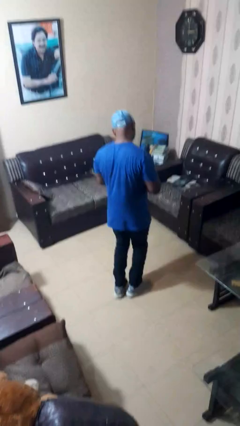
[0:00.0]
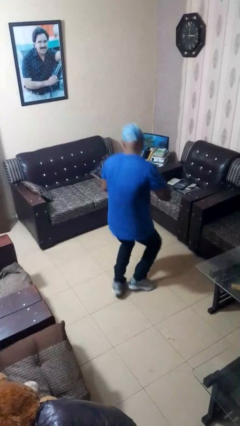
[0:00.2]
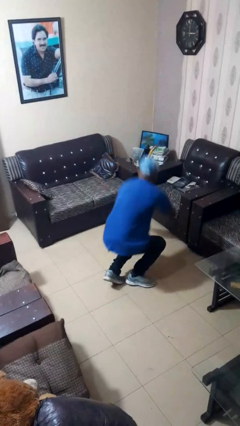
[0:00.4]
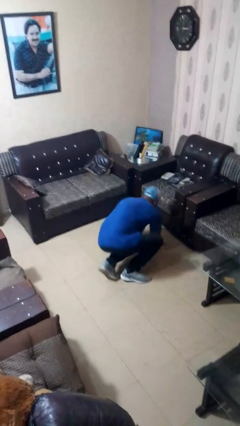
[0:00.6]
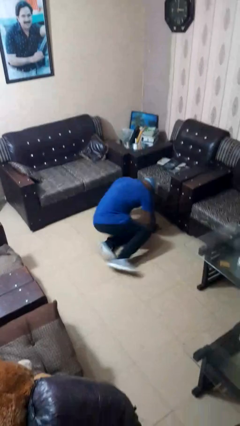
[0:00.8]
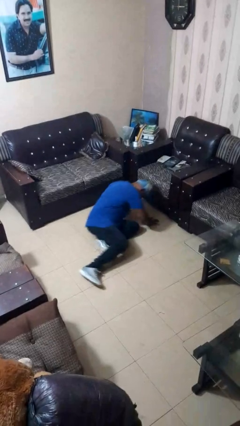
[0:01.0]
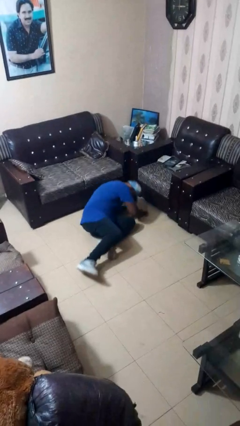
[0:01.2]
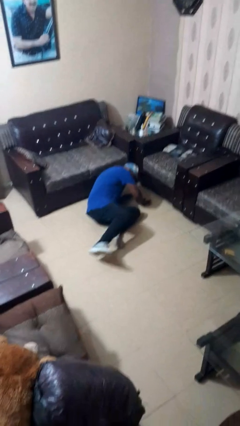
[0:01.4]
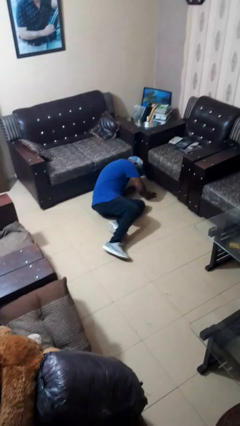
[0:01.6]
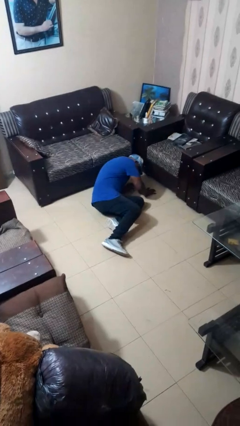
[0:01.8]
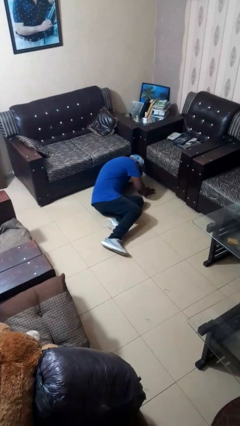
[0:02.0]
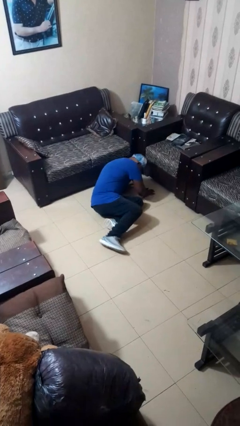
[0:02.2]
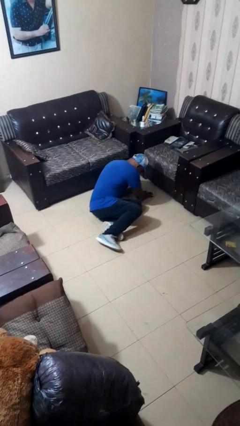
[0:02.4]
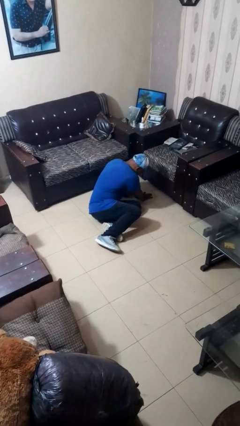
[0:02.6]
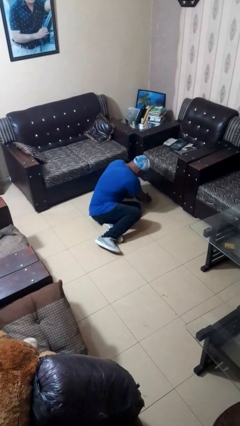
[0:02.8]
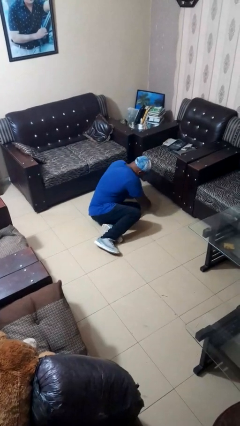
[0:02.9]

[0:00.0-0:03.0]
person trips on object on floor

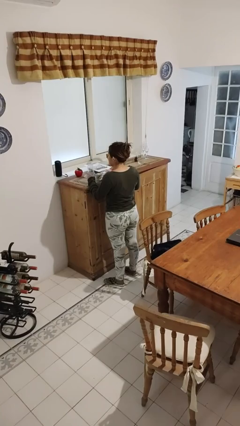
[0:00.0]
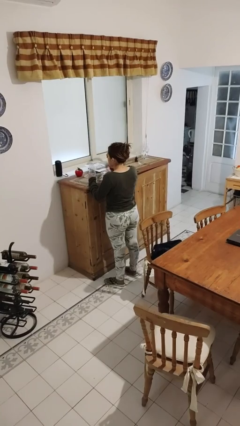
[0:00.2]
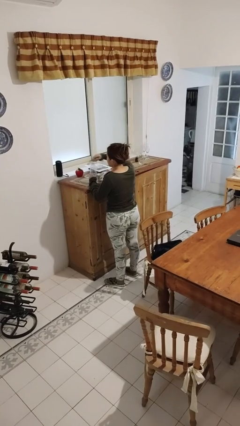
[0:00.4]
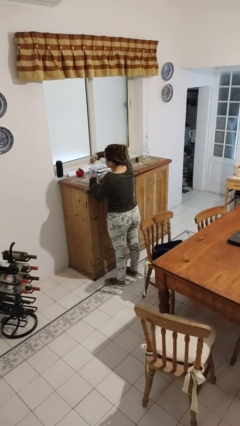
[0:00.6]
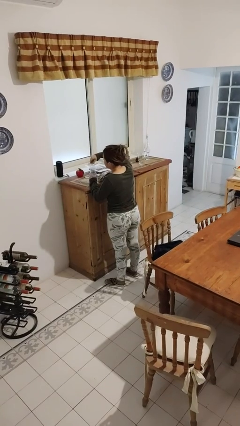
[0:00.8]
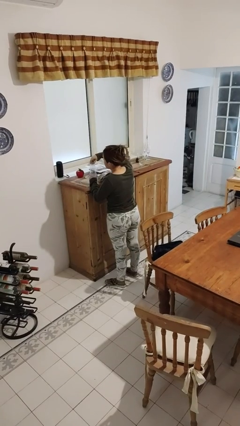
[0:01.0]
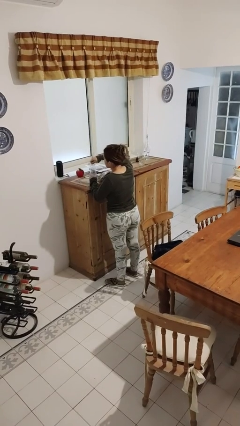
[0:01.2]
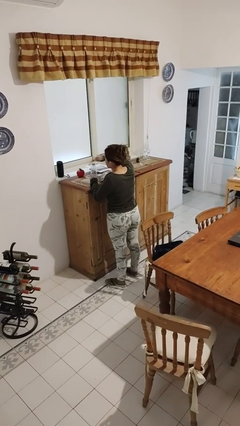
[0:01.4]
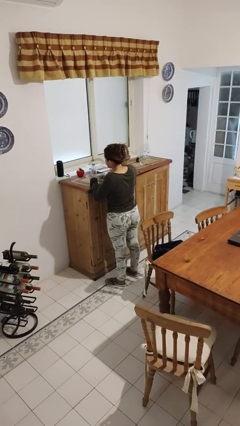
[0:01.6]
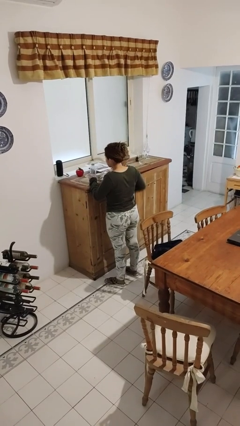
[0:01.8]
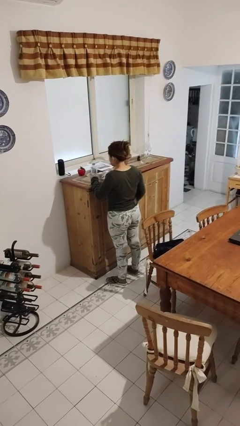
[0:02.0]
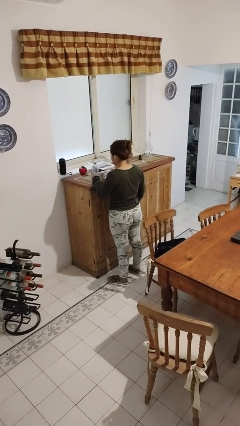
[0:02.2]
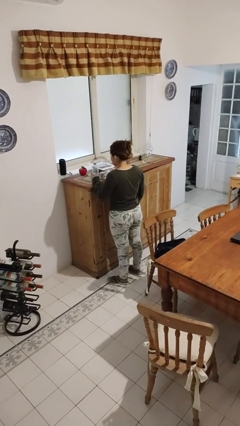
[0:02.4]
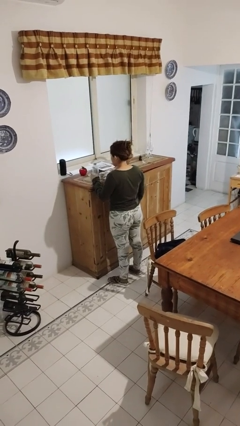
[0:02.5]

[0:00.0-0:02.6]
person screws lid to bottle

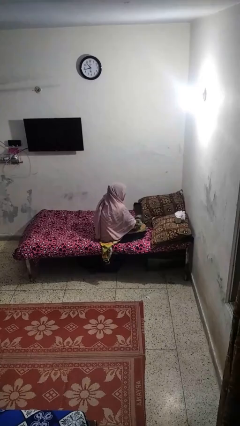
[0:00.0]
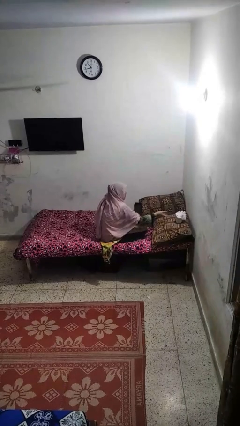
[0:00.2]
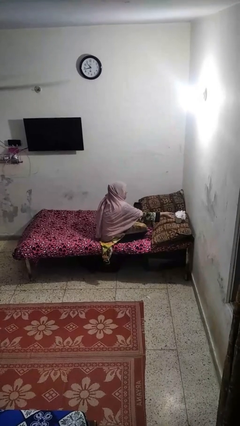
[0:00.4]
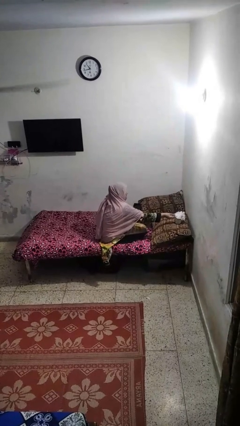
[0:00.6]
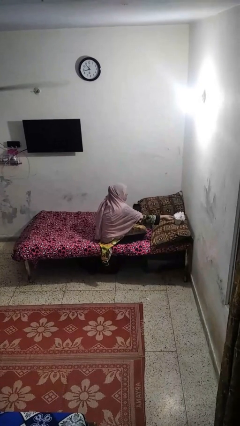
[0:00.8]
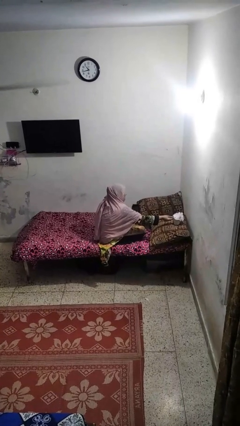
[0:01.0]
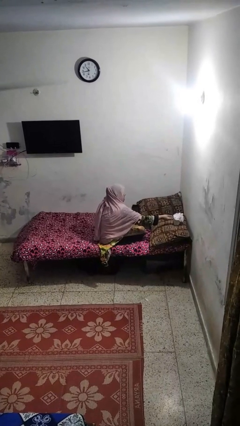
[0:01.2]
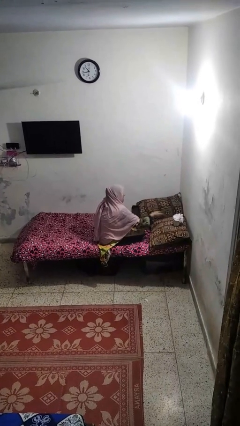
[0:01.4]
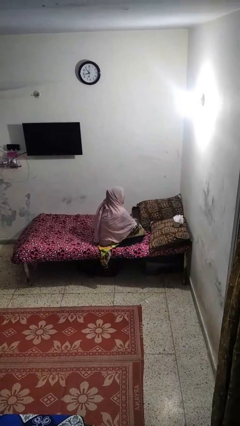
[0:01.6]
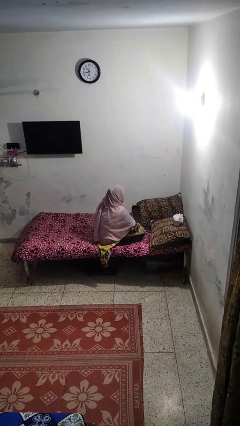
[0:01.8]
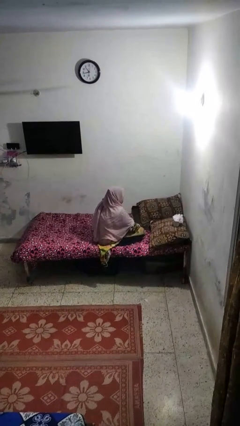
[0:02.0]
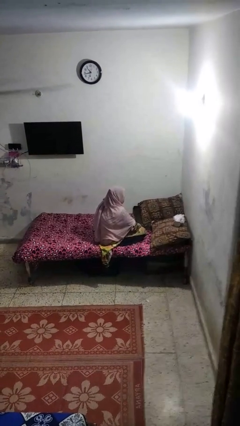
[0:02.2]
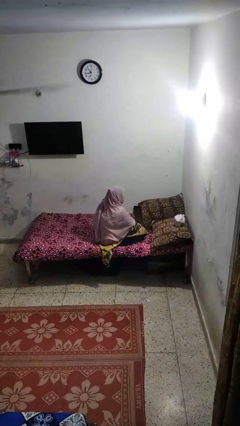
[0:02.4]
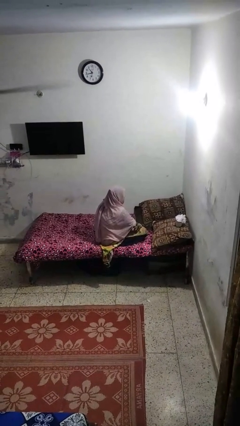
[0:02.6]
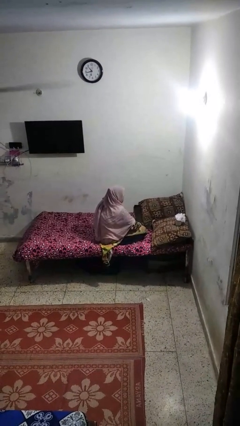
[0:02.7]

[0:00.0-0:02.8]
person arranges flowers in vase

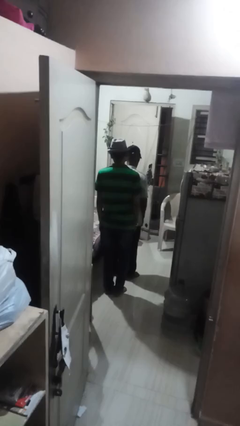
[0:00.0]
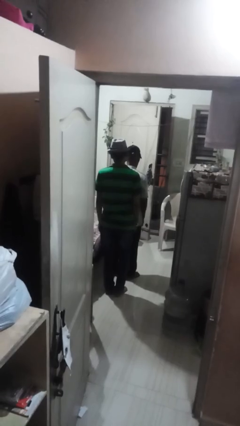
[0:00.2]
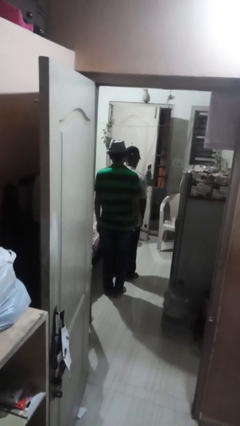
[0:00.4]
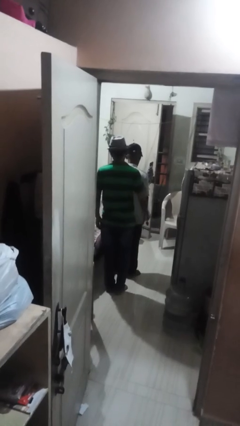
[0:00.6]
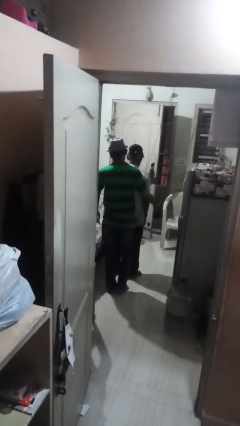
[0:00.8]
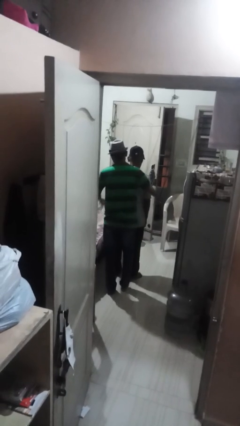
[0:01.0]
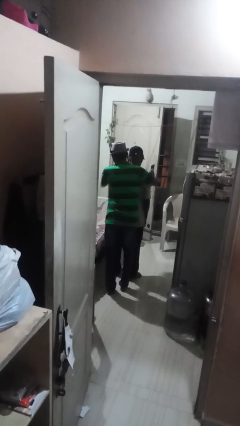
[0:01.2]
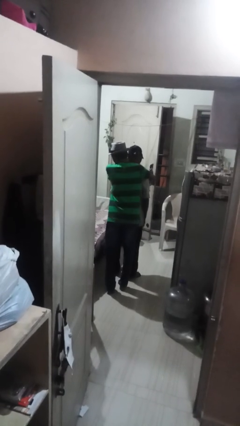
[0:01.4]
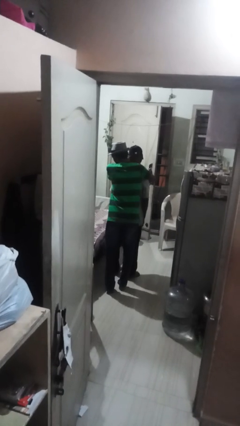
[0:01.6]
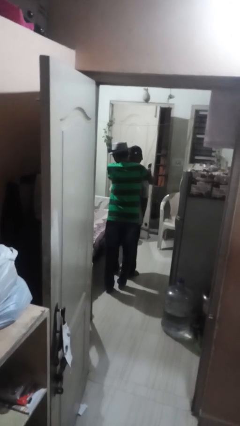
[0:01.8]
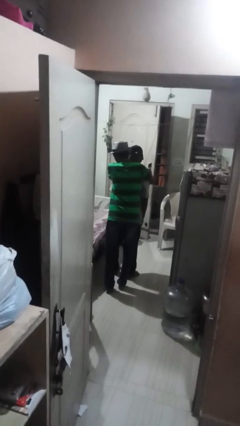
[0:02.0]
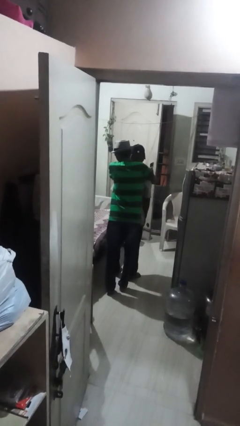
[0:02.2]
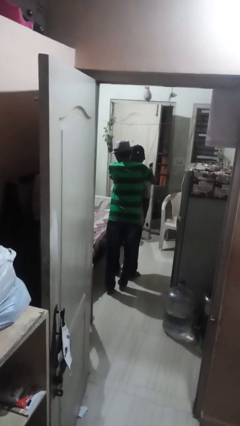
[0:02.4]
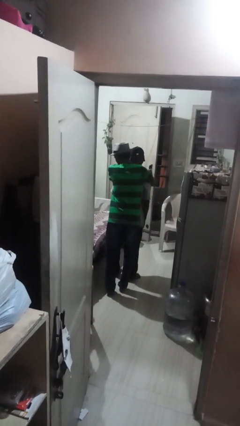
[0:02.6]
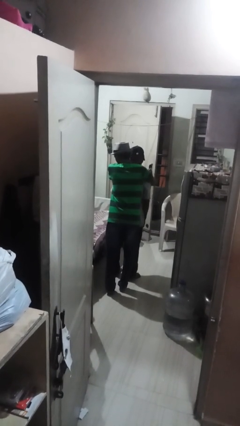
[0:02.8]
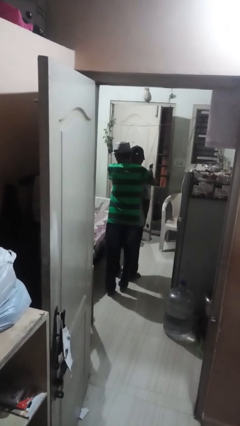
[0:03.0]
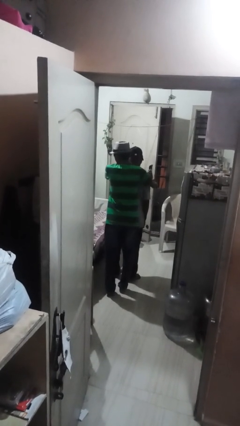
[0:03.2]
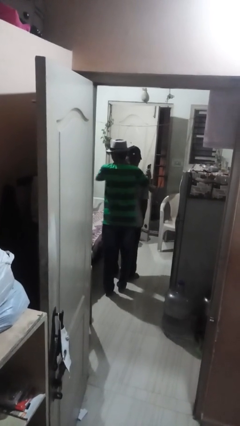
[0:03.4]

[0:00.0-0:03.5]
person hugs person from behind

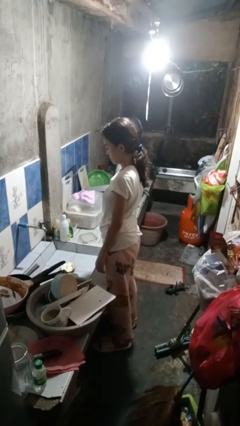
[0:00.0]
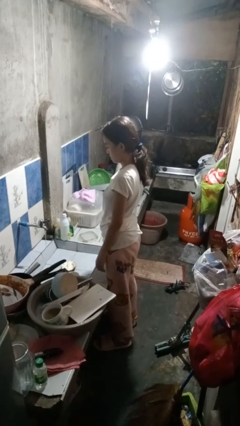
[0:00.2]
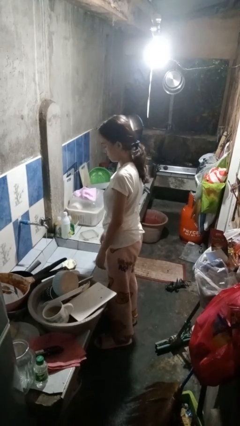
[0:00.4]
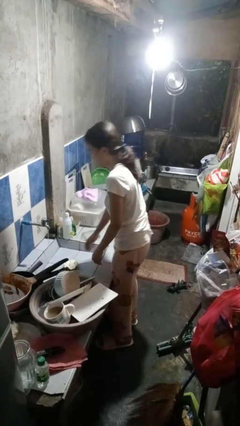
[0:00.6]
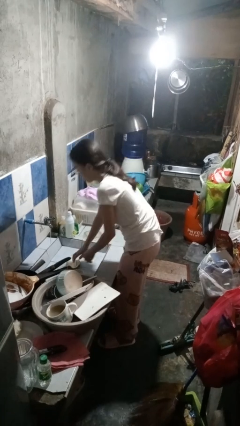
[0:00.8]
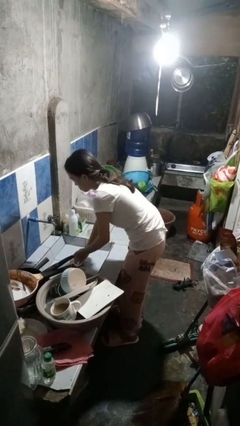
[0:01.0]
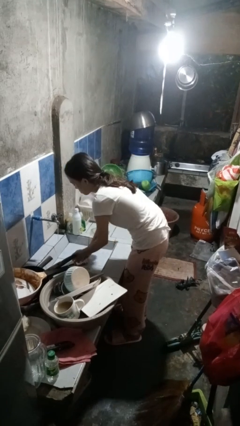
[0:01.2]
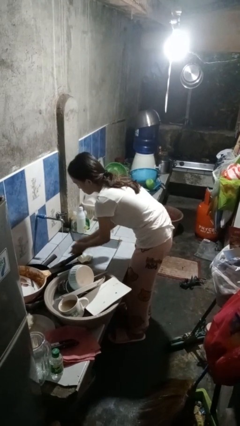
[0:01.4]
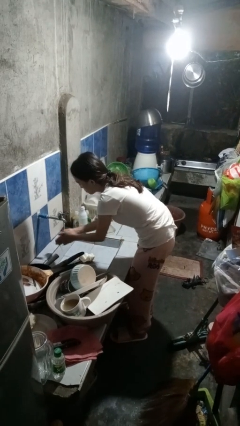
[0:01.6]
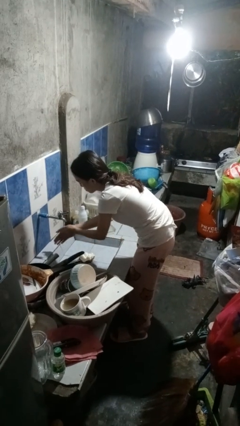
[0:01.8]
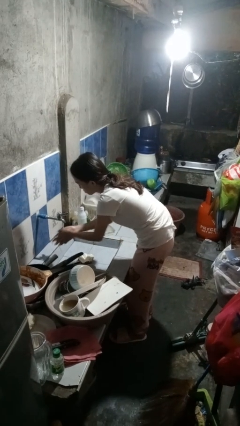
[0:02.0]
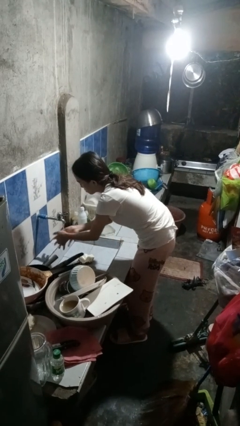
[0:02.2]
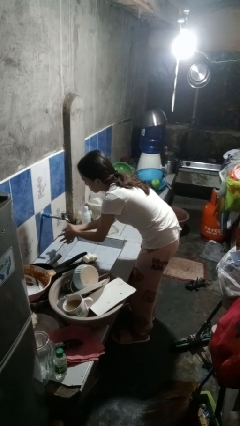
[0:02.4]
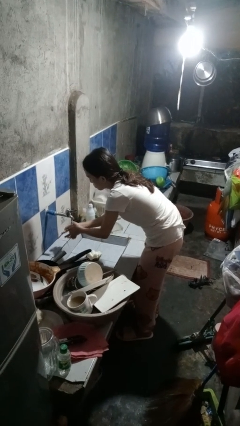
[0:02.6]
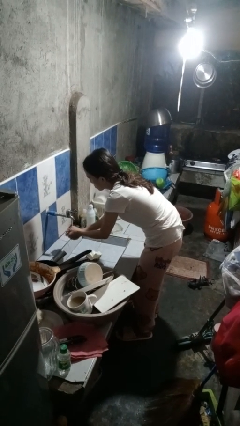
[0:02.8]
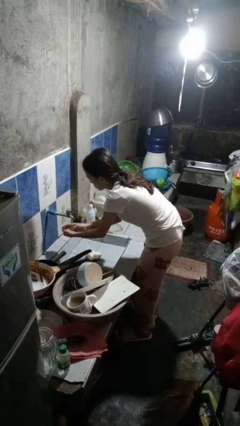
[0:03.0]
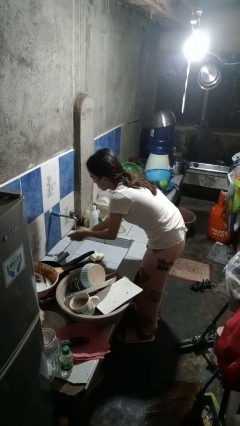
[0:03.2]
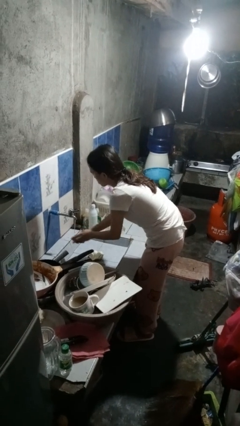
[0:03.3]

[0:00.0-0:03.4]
person washes hands

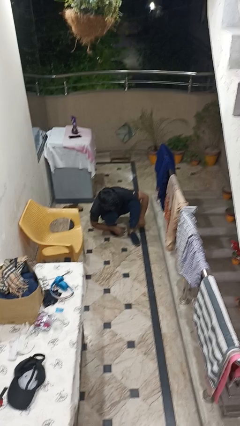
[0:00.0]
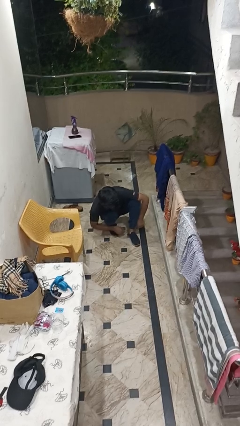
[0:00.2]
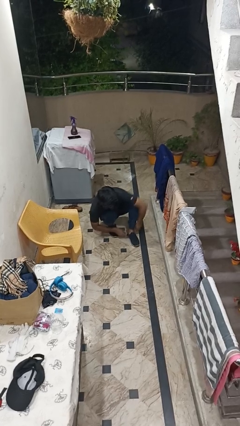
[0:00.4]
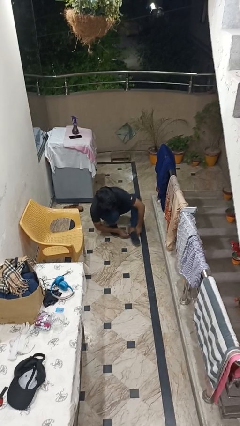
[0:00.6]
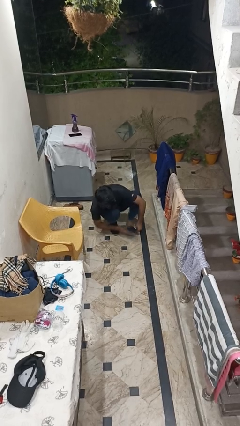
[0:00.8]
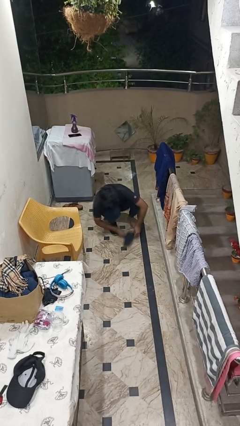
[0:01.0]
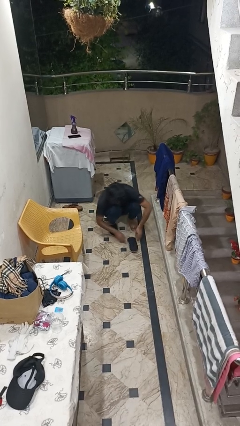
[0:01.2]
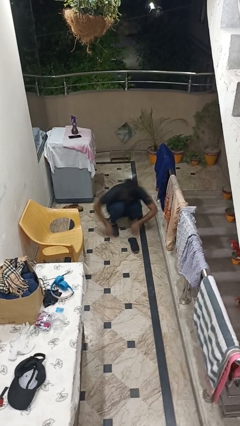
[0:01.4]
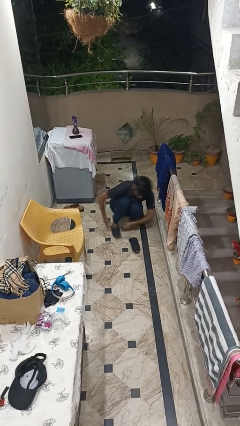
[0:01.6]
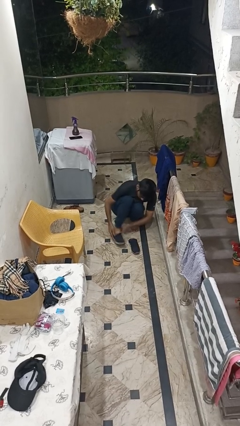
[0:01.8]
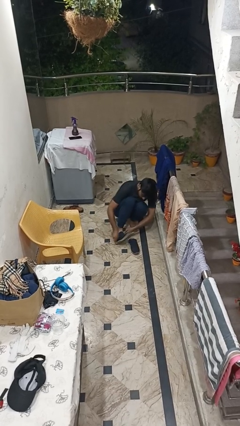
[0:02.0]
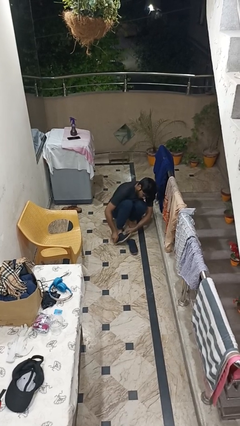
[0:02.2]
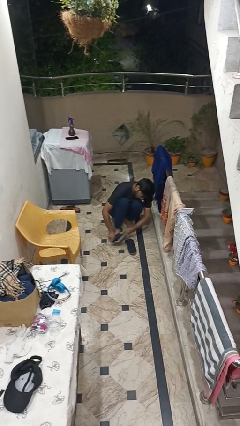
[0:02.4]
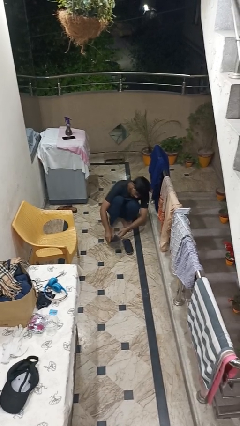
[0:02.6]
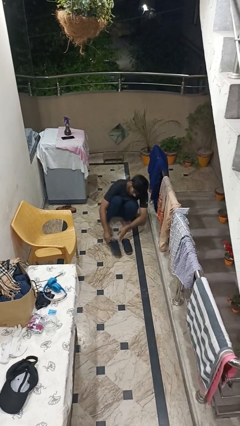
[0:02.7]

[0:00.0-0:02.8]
person takes off shoes
